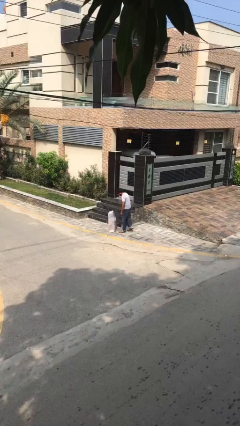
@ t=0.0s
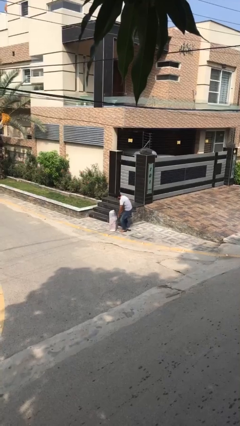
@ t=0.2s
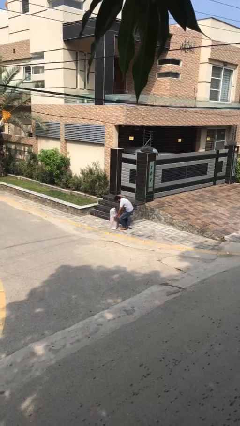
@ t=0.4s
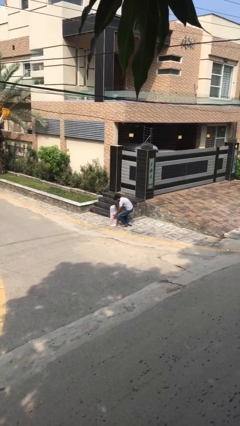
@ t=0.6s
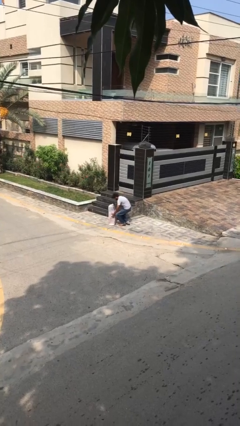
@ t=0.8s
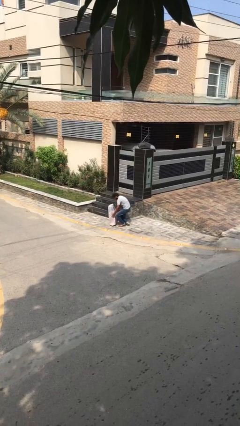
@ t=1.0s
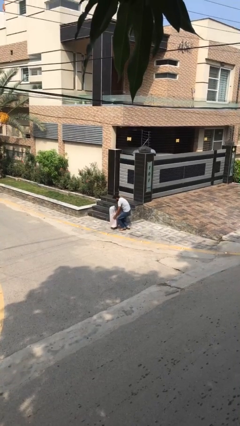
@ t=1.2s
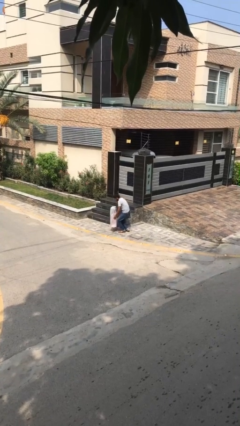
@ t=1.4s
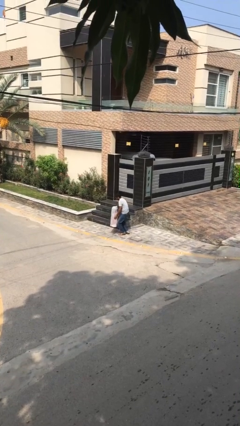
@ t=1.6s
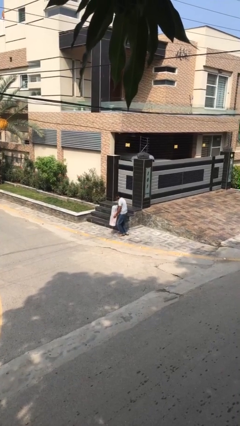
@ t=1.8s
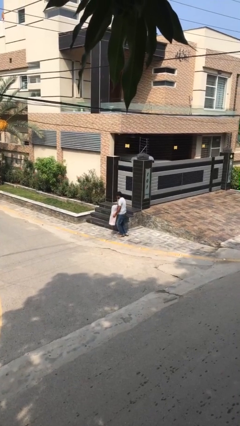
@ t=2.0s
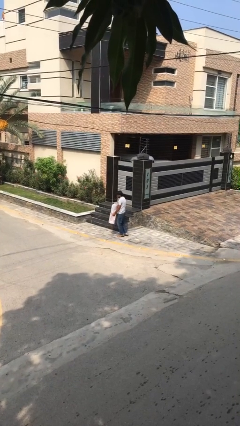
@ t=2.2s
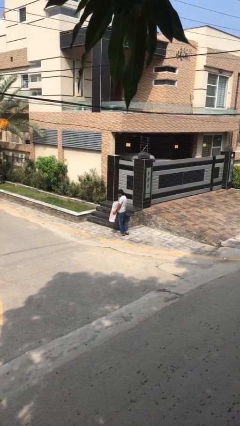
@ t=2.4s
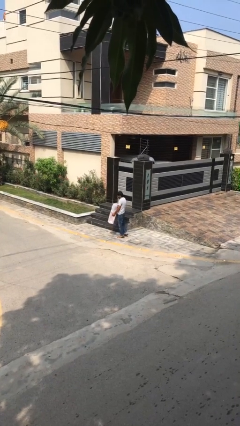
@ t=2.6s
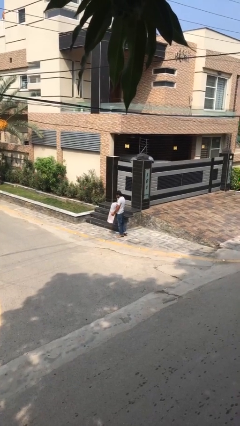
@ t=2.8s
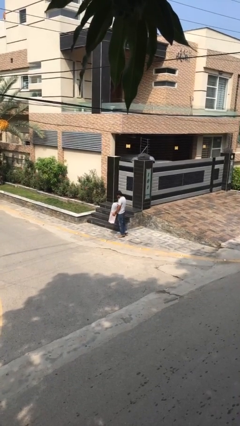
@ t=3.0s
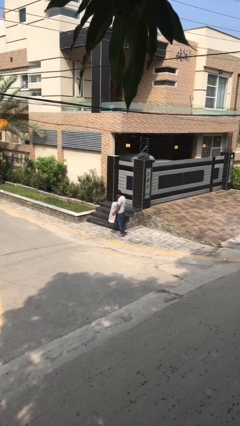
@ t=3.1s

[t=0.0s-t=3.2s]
person picks up object from floor

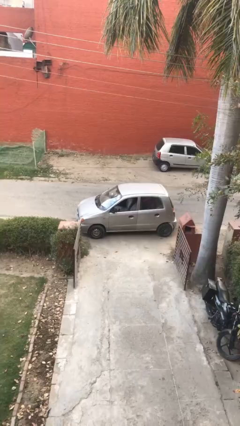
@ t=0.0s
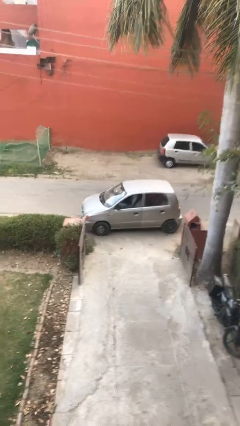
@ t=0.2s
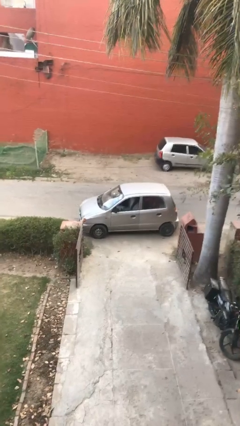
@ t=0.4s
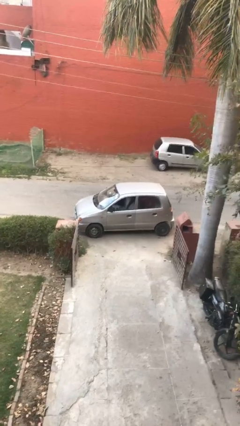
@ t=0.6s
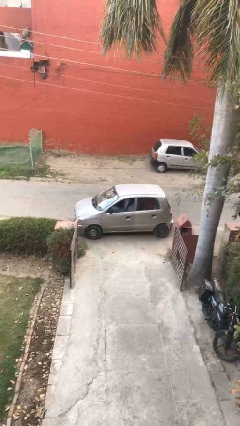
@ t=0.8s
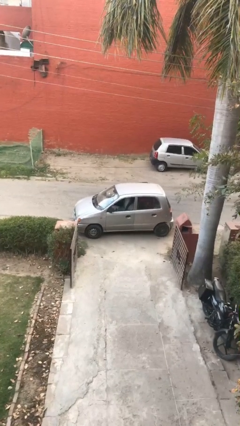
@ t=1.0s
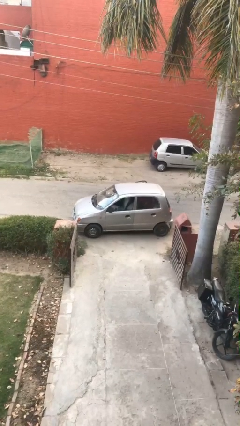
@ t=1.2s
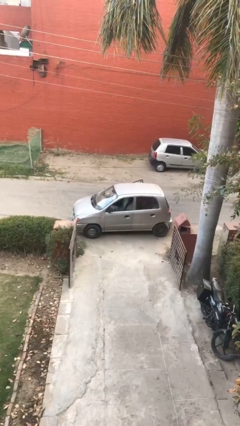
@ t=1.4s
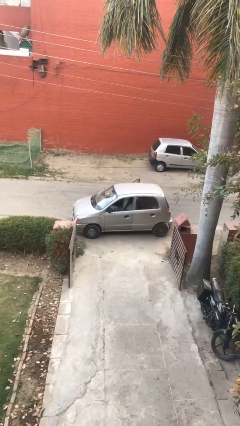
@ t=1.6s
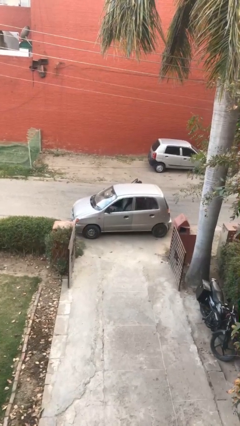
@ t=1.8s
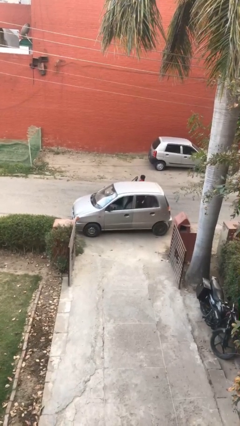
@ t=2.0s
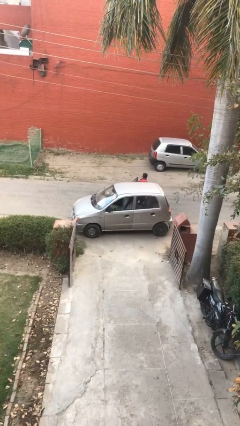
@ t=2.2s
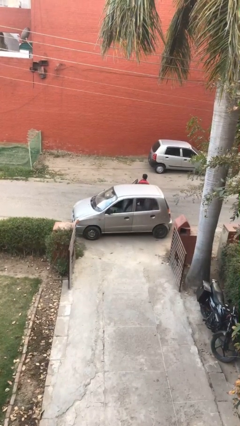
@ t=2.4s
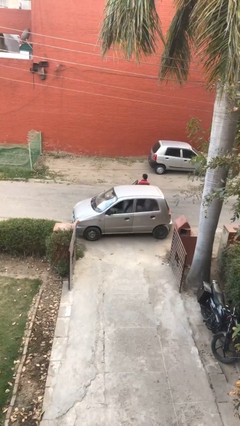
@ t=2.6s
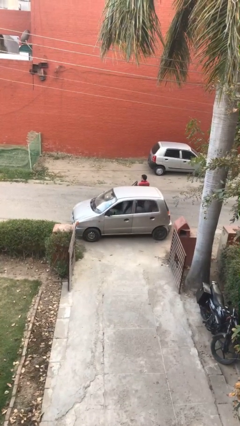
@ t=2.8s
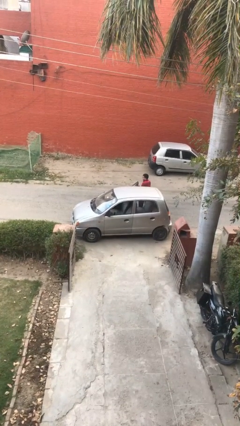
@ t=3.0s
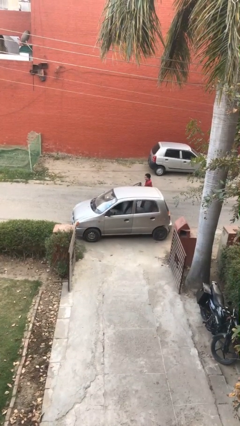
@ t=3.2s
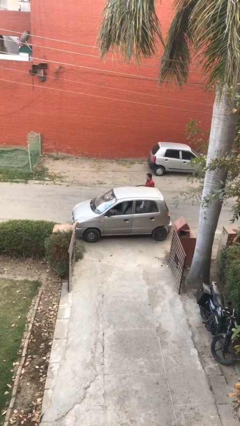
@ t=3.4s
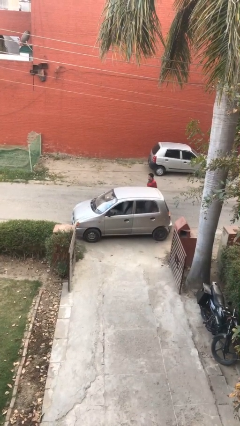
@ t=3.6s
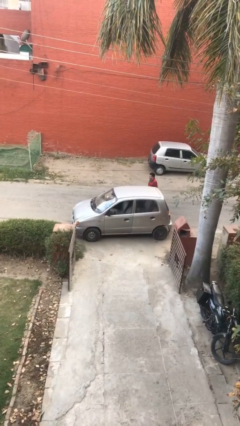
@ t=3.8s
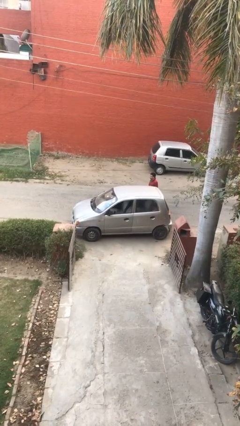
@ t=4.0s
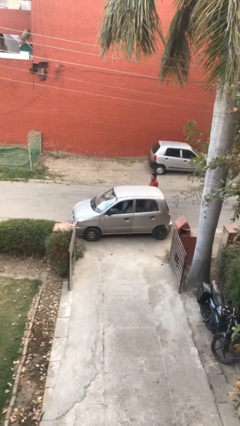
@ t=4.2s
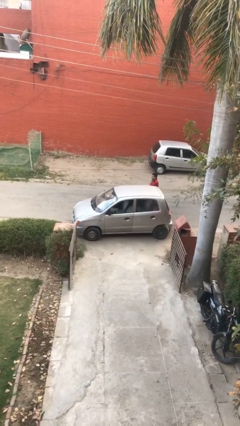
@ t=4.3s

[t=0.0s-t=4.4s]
car drops off person

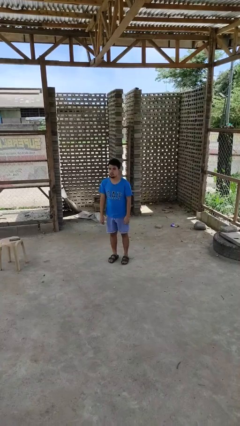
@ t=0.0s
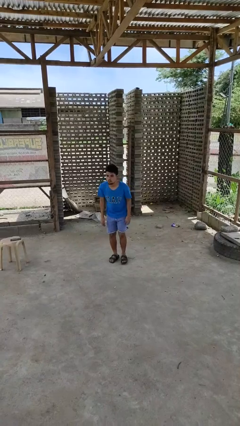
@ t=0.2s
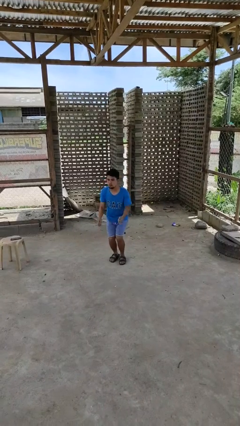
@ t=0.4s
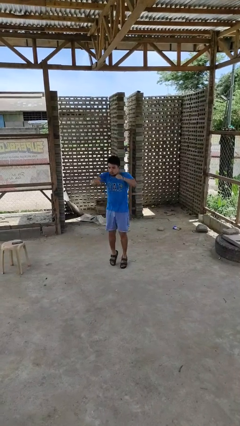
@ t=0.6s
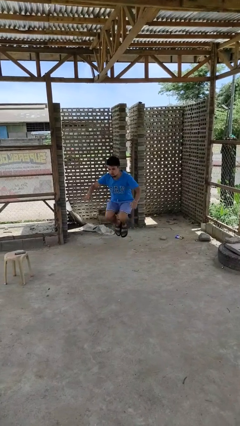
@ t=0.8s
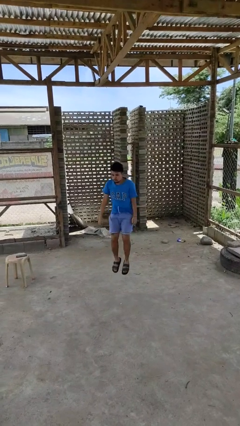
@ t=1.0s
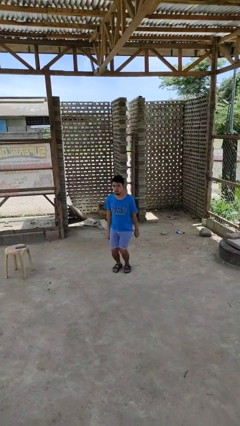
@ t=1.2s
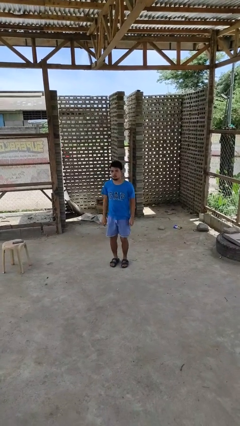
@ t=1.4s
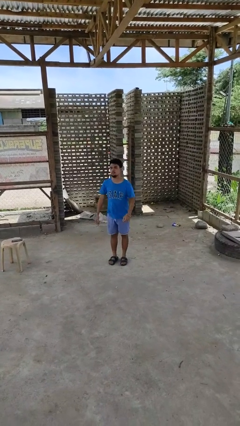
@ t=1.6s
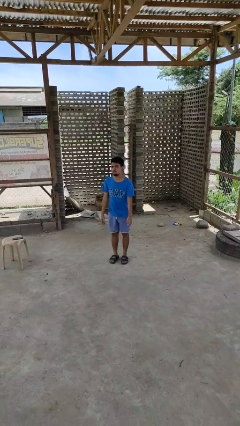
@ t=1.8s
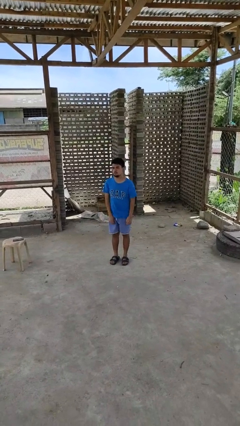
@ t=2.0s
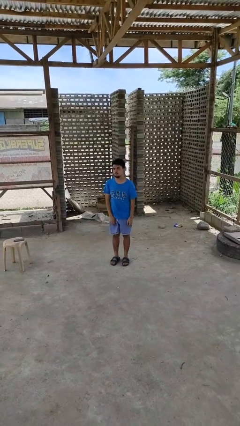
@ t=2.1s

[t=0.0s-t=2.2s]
person jumps

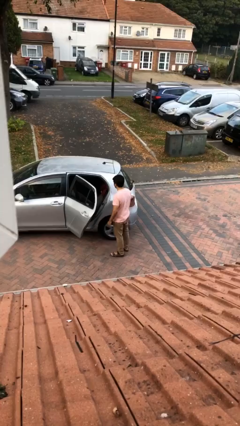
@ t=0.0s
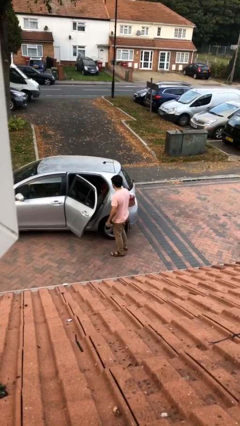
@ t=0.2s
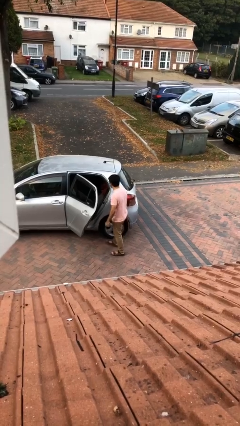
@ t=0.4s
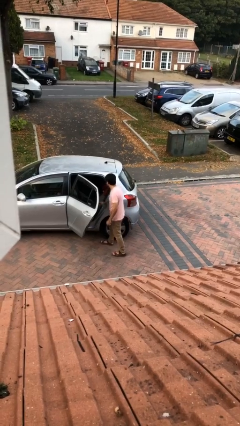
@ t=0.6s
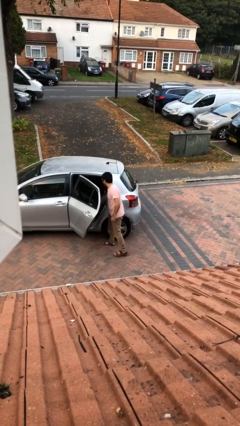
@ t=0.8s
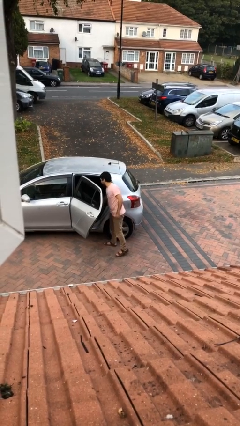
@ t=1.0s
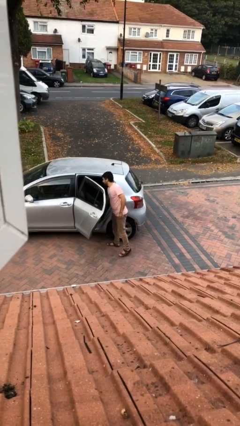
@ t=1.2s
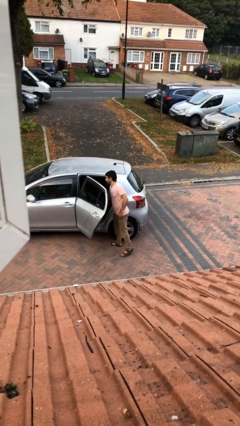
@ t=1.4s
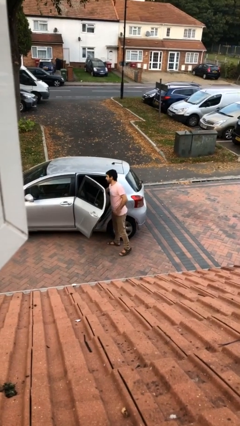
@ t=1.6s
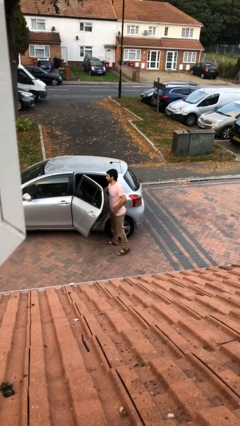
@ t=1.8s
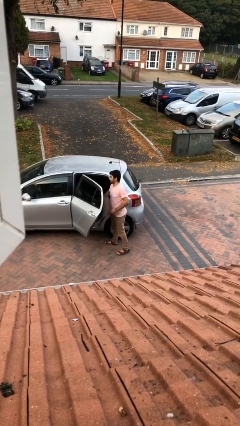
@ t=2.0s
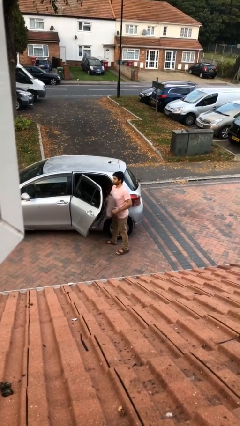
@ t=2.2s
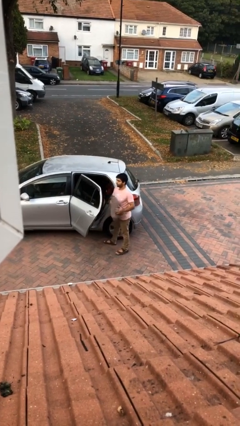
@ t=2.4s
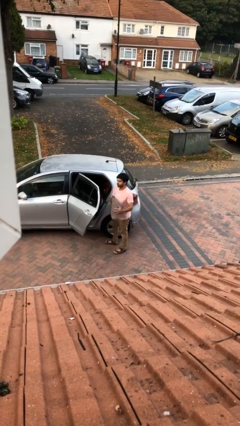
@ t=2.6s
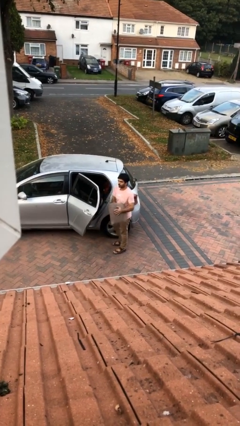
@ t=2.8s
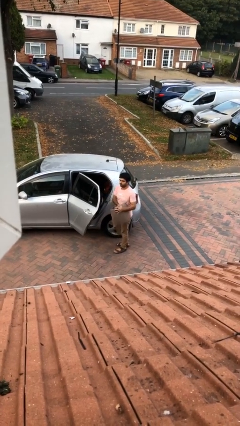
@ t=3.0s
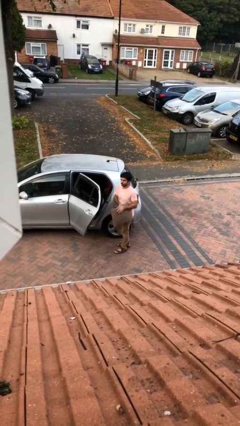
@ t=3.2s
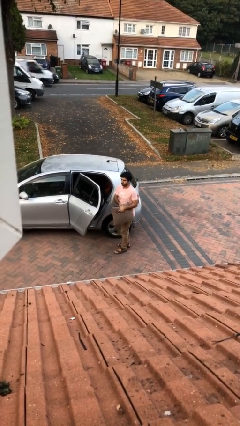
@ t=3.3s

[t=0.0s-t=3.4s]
person unloads car

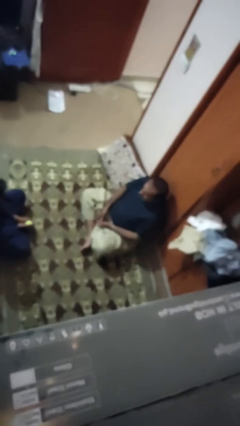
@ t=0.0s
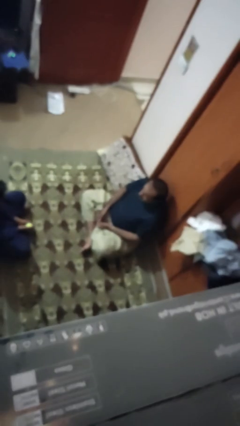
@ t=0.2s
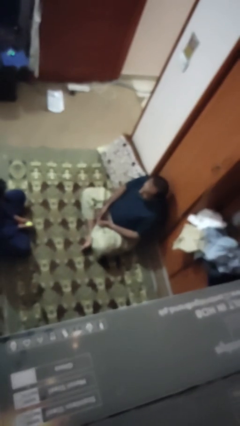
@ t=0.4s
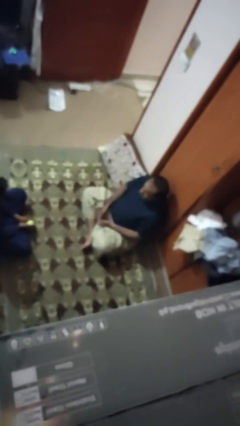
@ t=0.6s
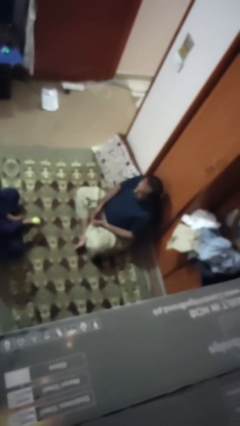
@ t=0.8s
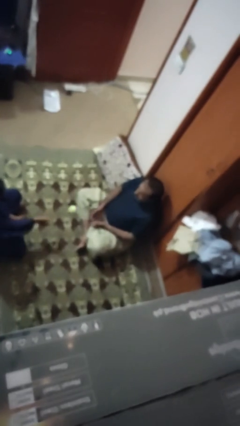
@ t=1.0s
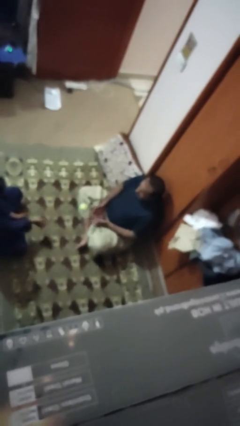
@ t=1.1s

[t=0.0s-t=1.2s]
person catches object from person

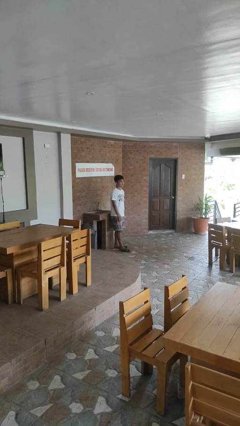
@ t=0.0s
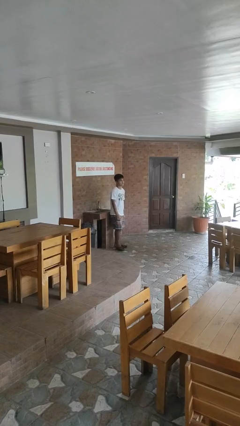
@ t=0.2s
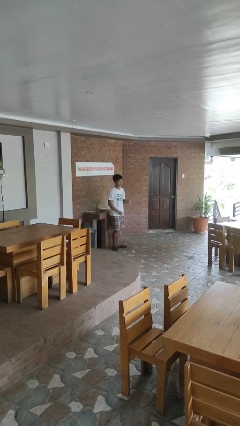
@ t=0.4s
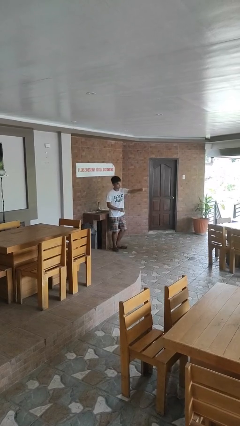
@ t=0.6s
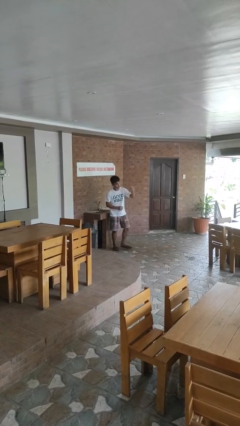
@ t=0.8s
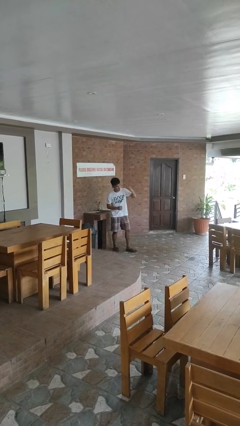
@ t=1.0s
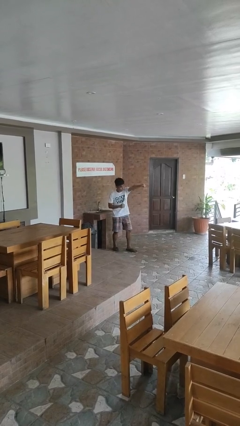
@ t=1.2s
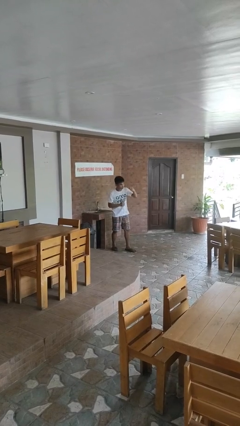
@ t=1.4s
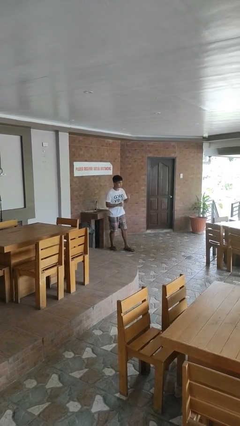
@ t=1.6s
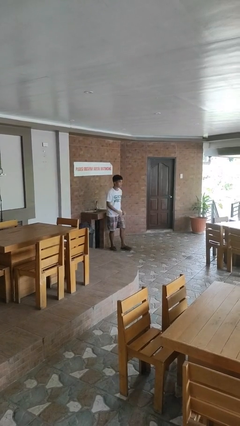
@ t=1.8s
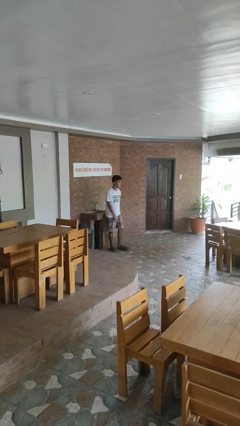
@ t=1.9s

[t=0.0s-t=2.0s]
person punches

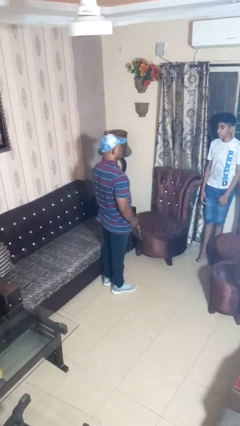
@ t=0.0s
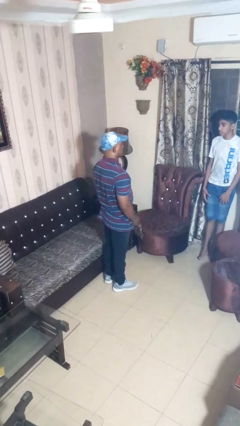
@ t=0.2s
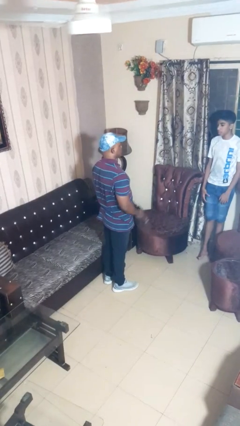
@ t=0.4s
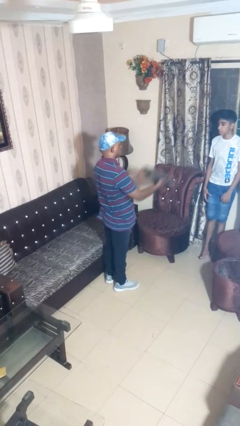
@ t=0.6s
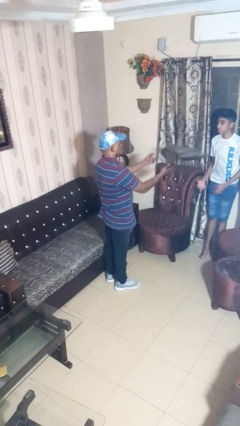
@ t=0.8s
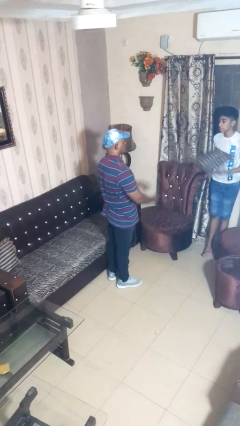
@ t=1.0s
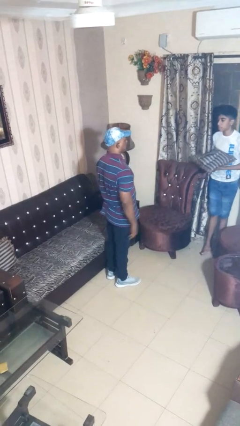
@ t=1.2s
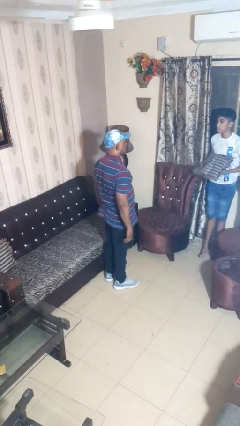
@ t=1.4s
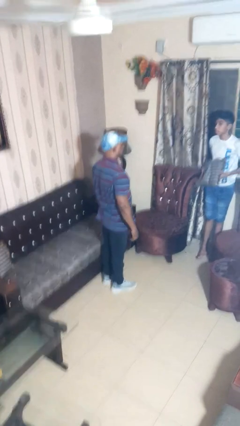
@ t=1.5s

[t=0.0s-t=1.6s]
person throws object to person
